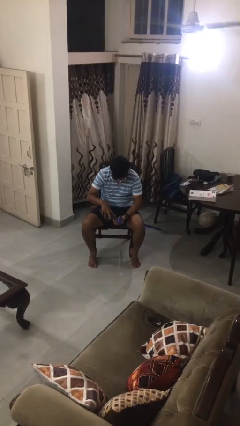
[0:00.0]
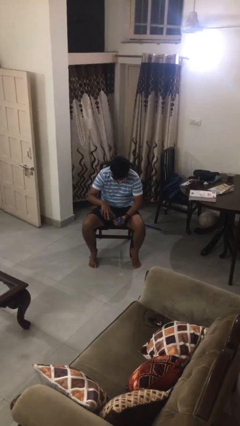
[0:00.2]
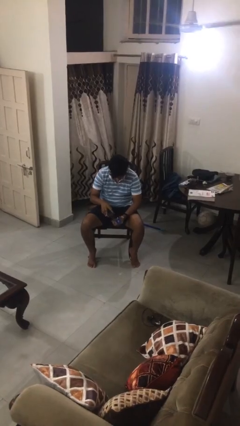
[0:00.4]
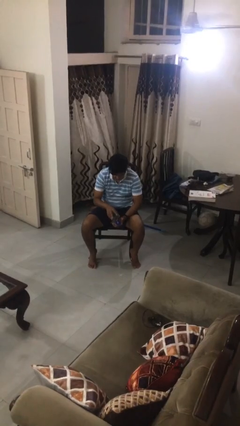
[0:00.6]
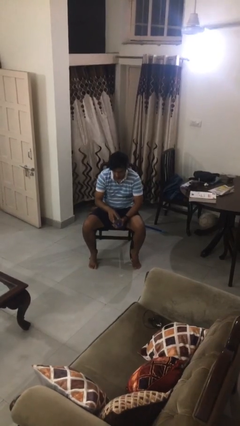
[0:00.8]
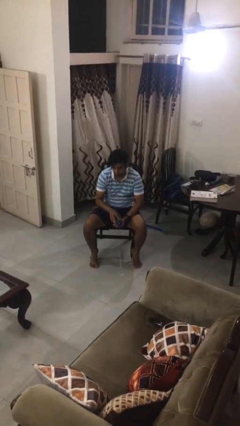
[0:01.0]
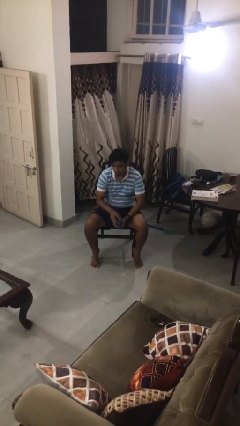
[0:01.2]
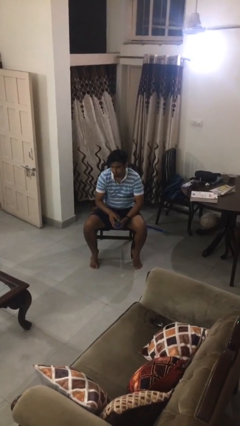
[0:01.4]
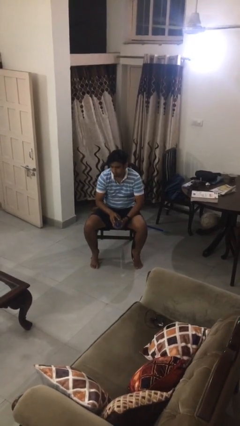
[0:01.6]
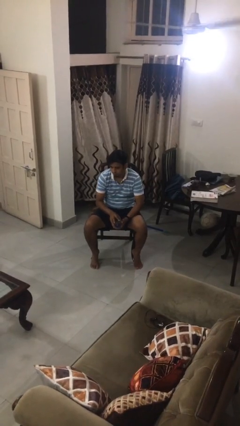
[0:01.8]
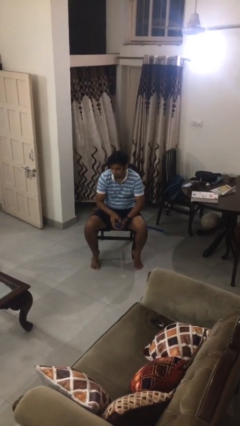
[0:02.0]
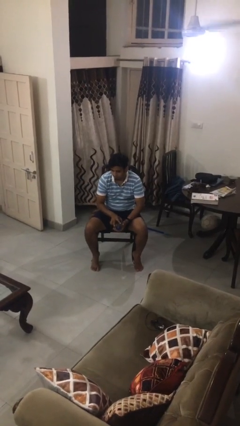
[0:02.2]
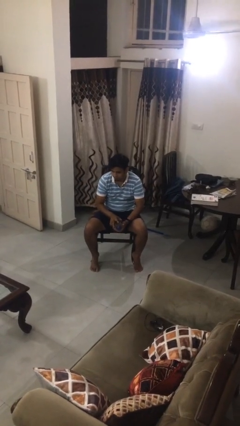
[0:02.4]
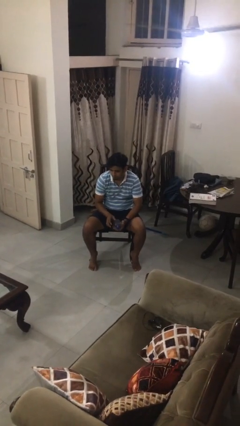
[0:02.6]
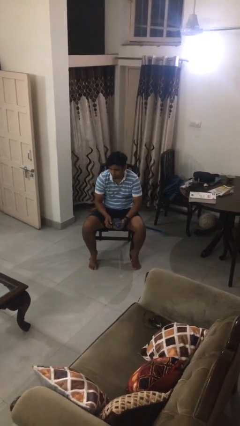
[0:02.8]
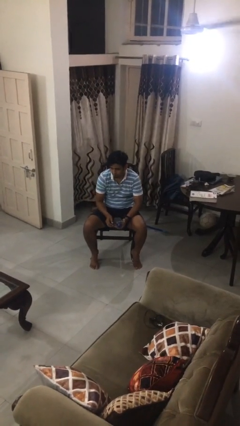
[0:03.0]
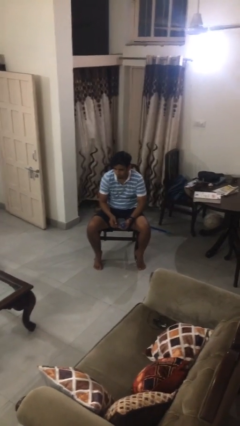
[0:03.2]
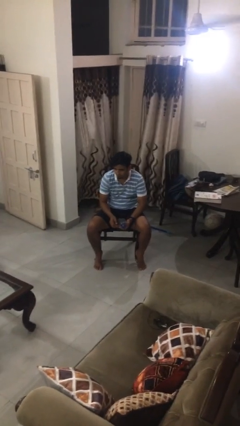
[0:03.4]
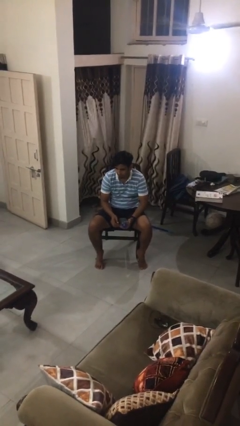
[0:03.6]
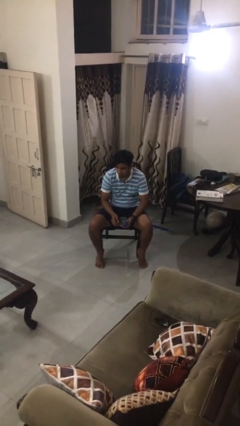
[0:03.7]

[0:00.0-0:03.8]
person closes jewelry box

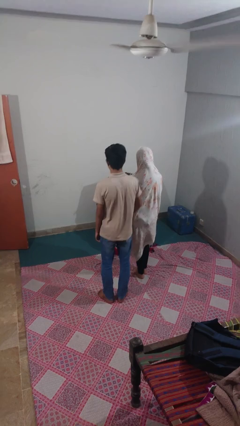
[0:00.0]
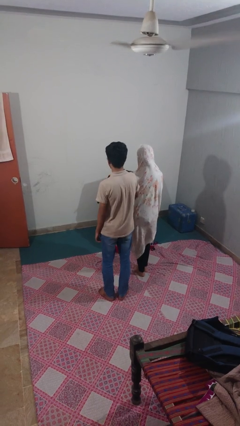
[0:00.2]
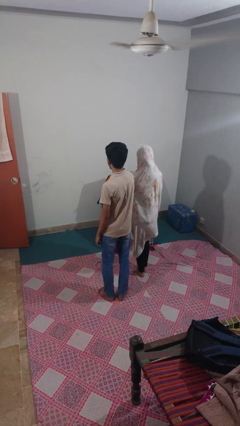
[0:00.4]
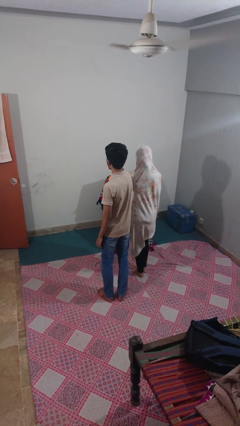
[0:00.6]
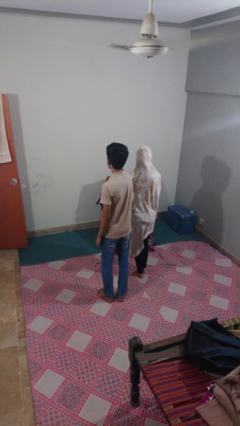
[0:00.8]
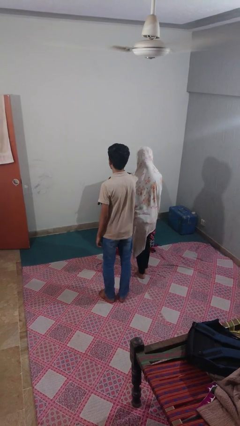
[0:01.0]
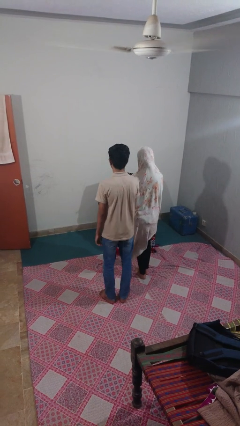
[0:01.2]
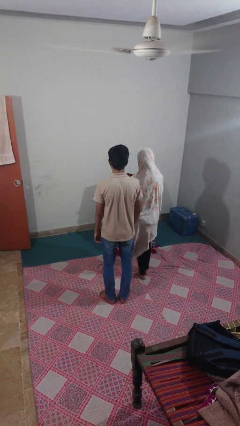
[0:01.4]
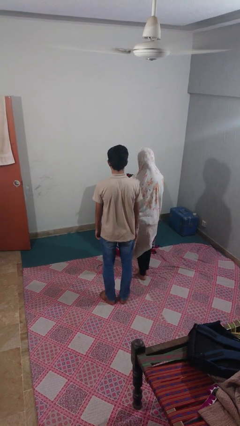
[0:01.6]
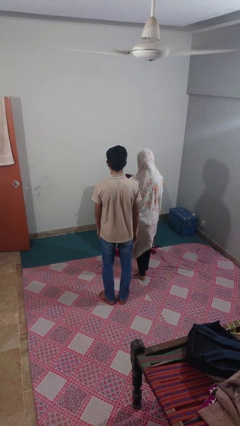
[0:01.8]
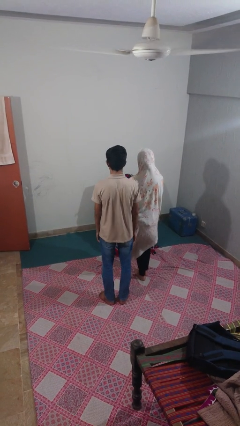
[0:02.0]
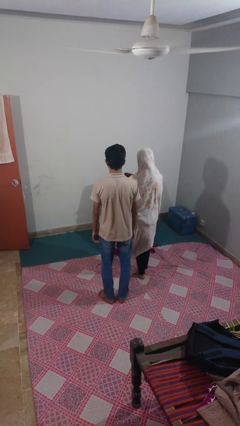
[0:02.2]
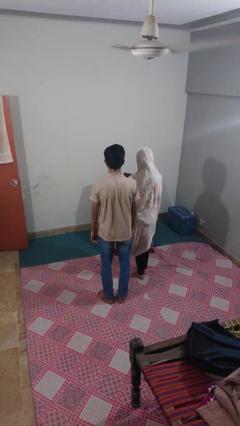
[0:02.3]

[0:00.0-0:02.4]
person nudges person with elbow

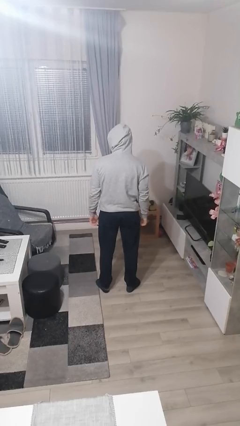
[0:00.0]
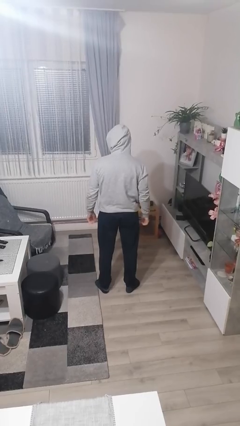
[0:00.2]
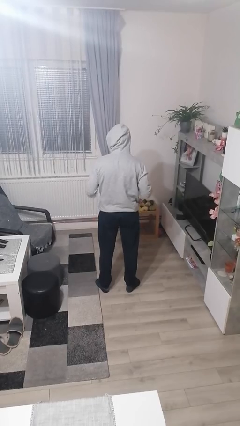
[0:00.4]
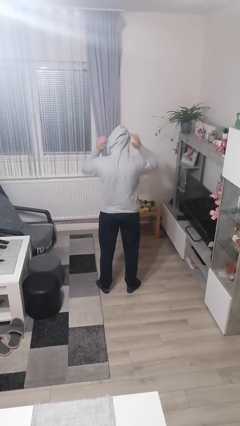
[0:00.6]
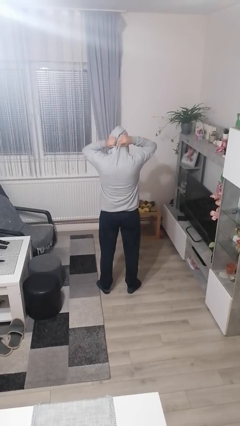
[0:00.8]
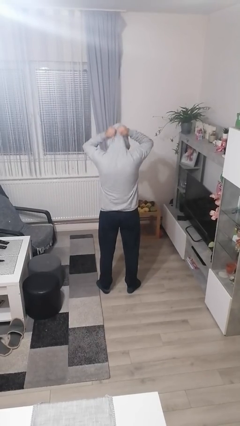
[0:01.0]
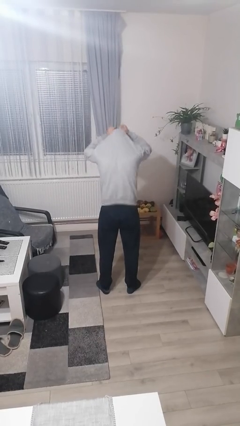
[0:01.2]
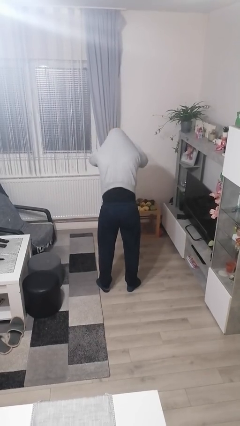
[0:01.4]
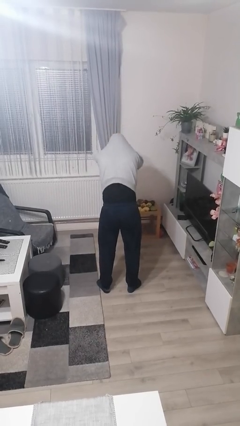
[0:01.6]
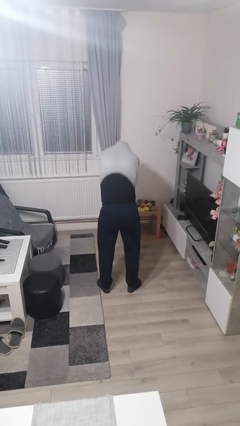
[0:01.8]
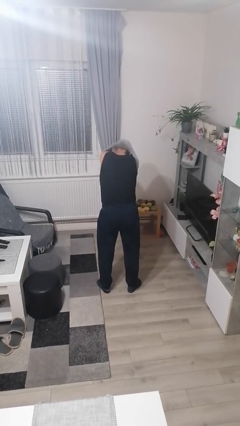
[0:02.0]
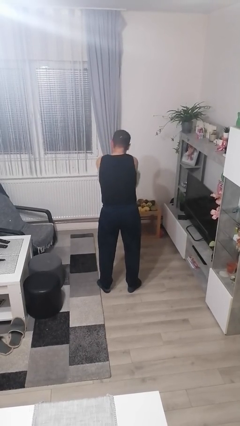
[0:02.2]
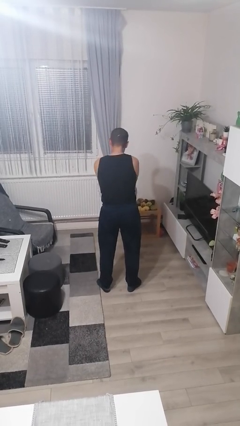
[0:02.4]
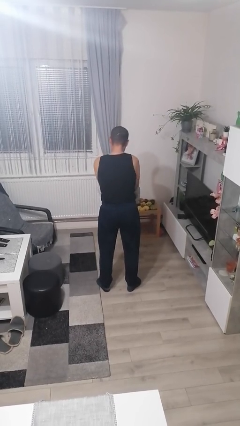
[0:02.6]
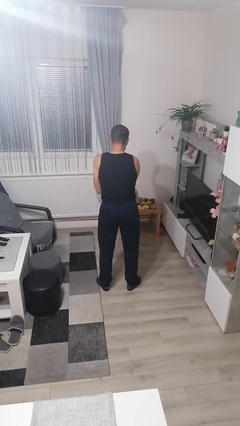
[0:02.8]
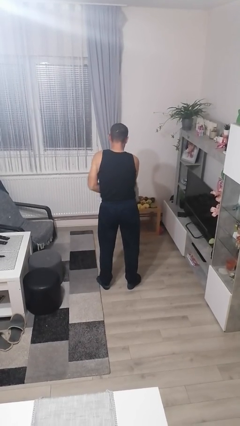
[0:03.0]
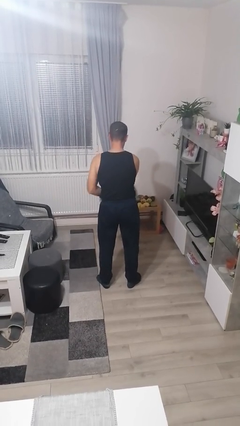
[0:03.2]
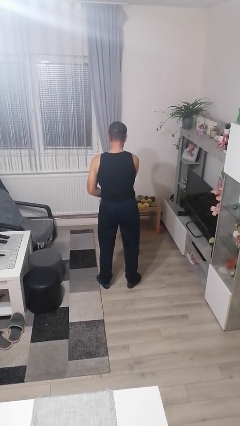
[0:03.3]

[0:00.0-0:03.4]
person takes off hoodie

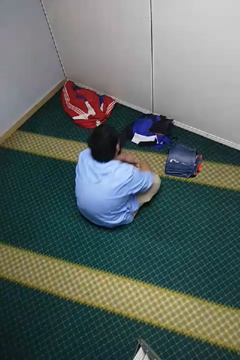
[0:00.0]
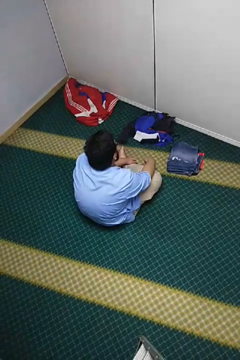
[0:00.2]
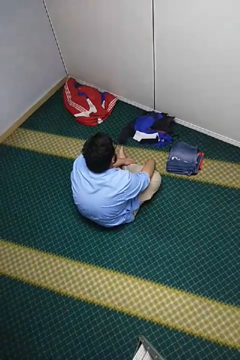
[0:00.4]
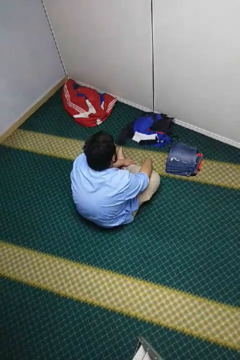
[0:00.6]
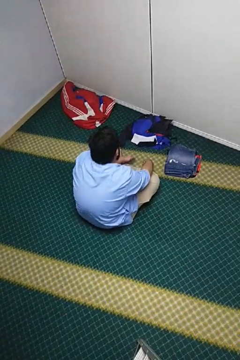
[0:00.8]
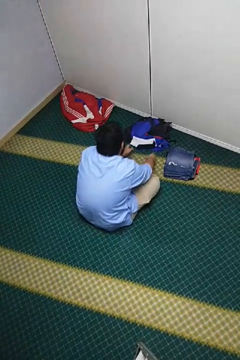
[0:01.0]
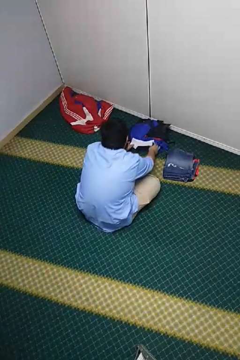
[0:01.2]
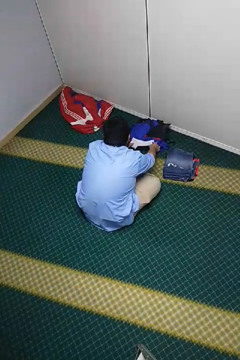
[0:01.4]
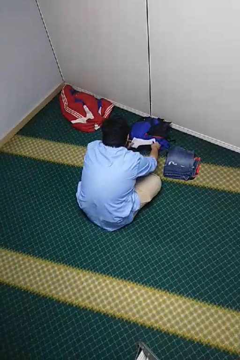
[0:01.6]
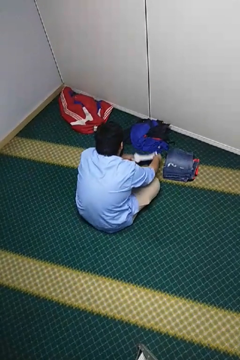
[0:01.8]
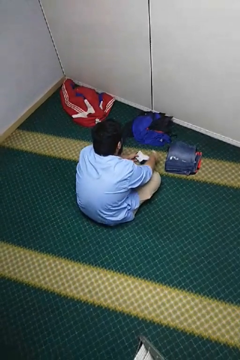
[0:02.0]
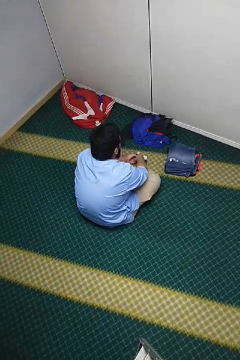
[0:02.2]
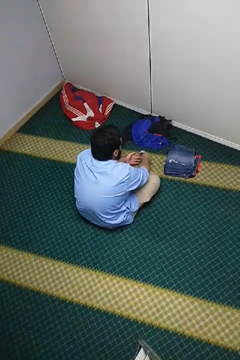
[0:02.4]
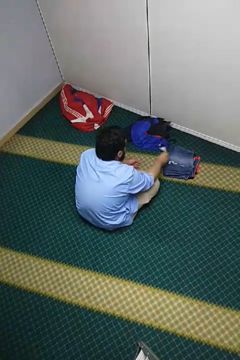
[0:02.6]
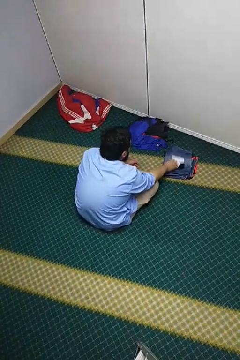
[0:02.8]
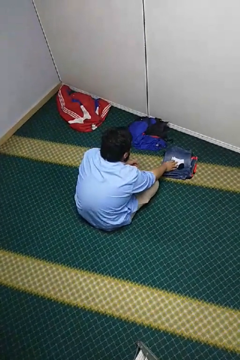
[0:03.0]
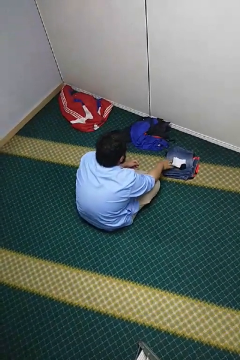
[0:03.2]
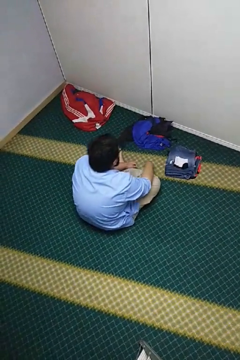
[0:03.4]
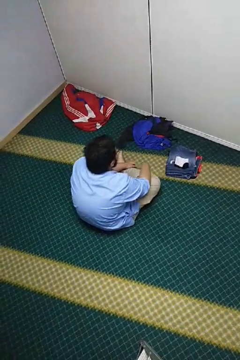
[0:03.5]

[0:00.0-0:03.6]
person folds socks

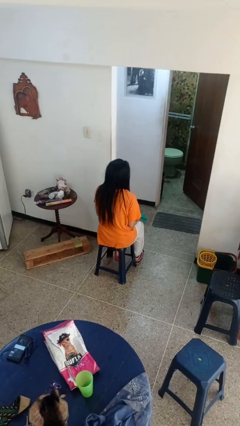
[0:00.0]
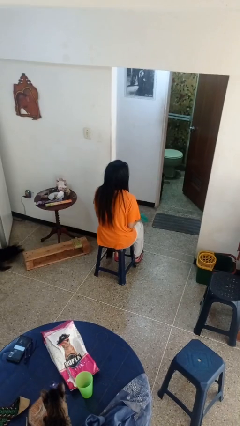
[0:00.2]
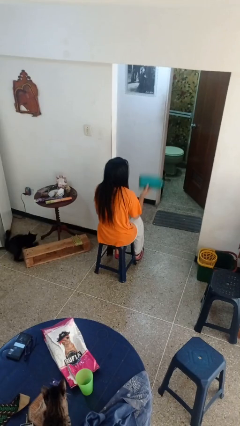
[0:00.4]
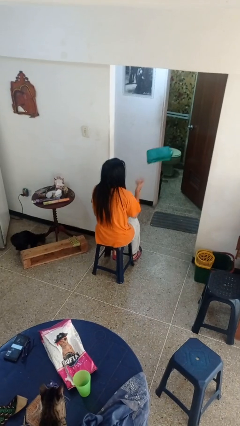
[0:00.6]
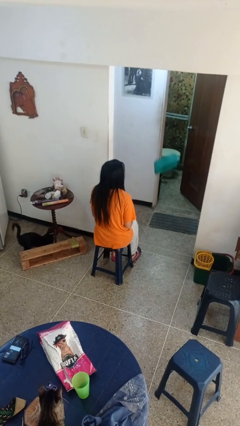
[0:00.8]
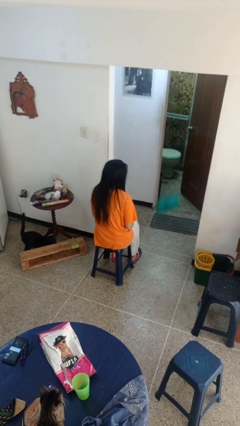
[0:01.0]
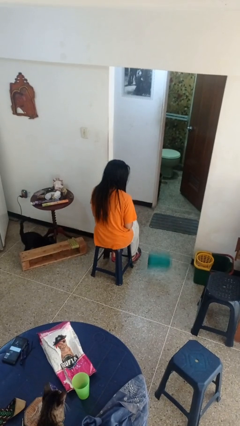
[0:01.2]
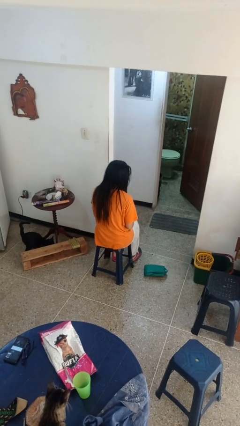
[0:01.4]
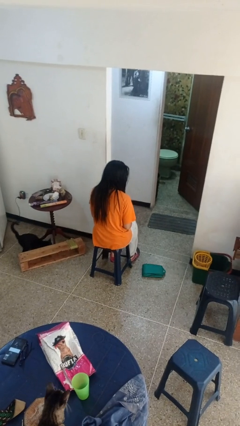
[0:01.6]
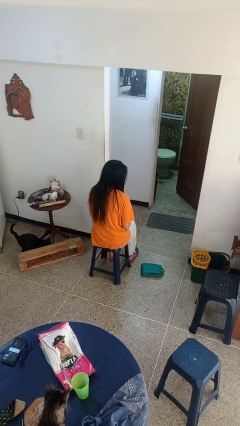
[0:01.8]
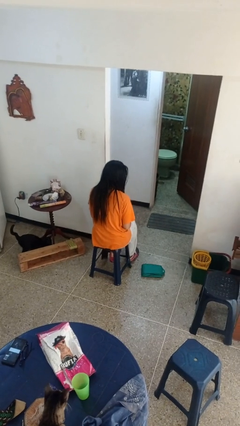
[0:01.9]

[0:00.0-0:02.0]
person throws object into air

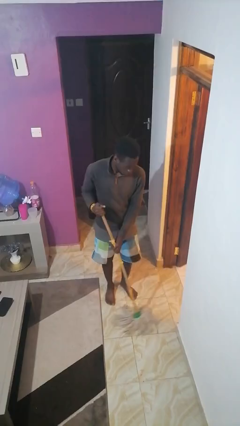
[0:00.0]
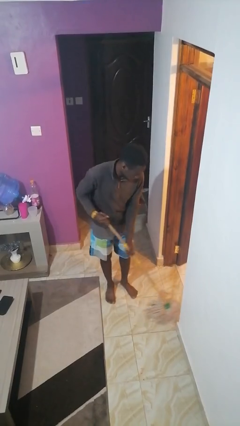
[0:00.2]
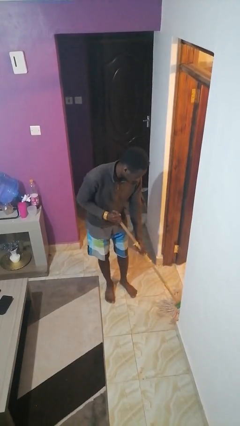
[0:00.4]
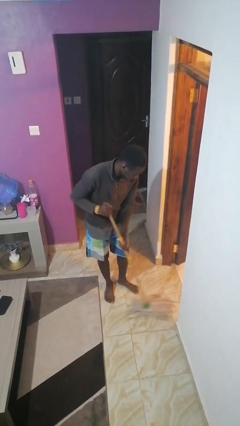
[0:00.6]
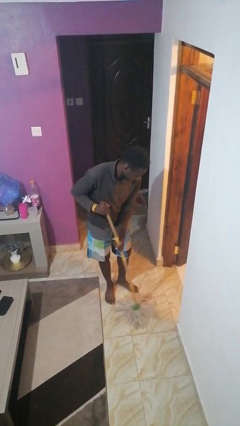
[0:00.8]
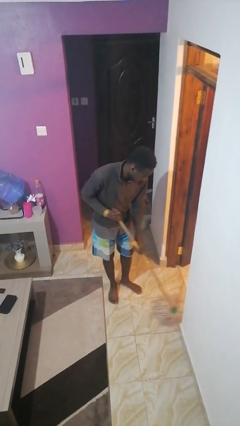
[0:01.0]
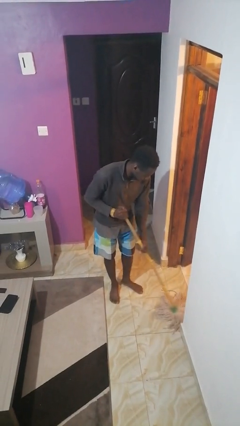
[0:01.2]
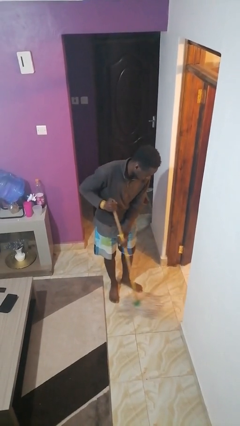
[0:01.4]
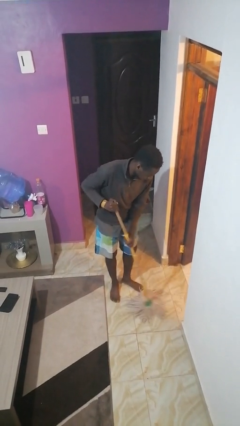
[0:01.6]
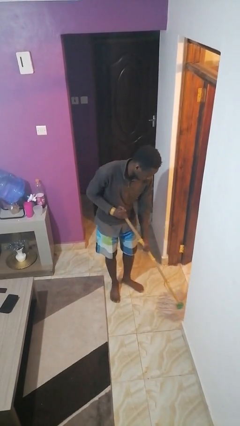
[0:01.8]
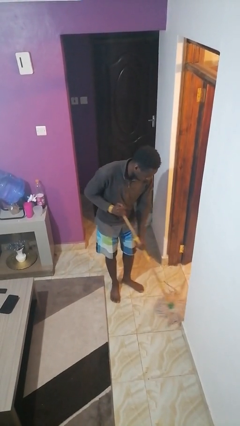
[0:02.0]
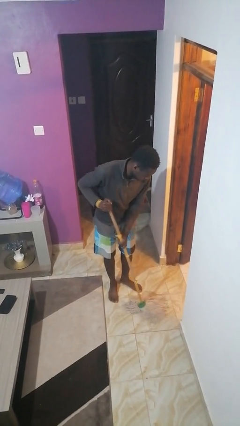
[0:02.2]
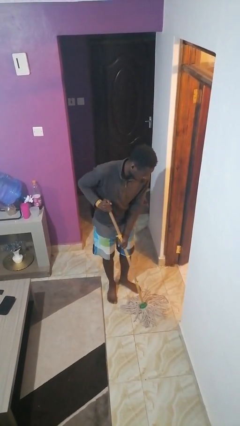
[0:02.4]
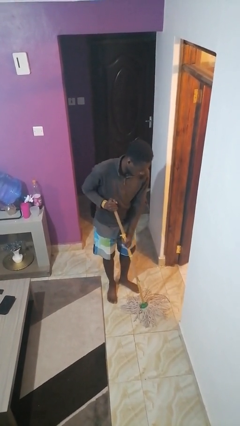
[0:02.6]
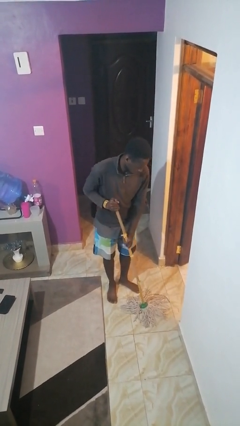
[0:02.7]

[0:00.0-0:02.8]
person mops
